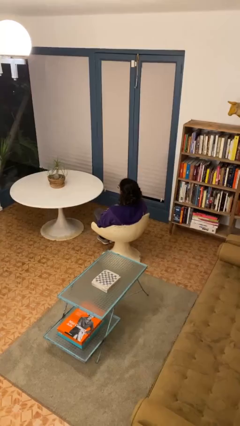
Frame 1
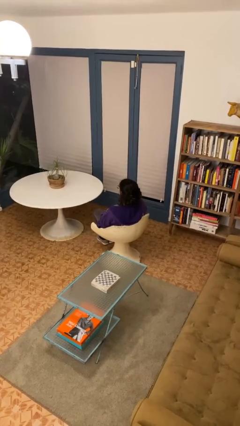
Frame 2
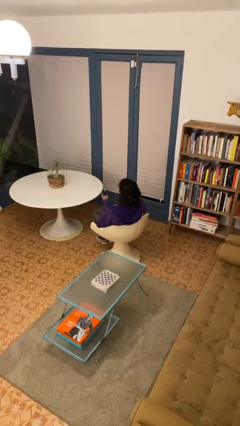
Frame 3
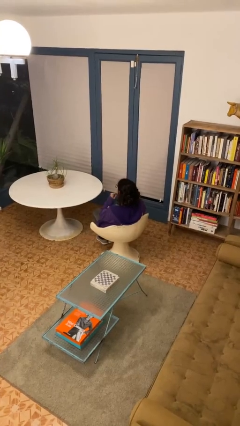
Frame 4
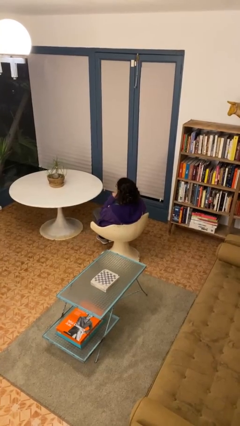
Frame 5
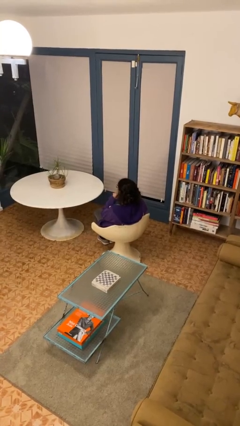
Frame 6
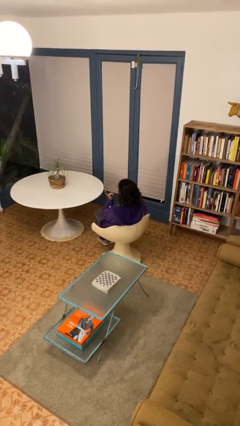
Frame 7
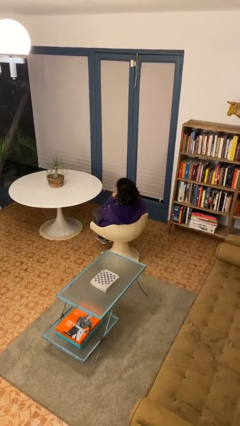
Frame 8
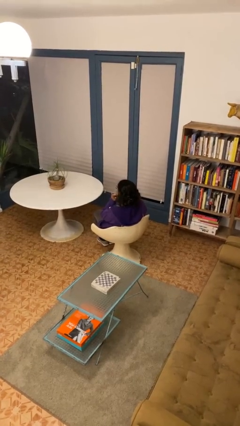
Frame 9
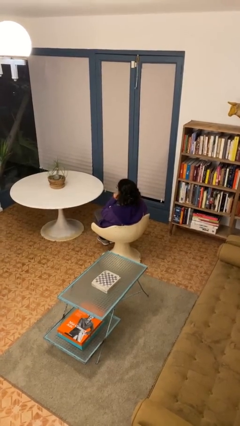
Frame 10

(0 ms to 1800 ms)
person gestures listen closely

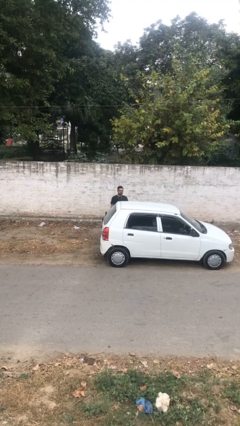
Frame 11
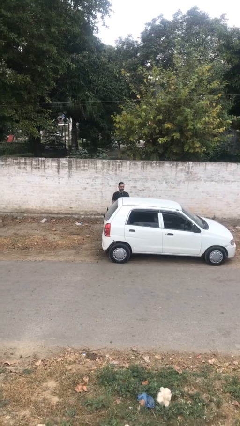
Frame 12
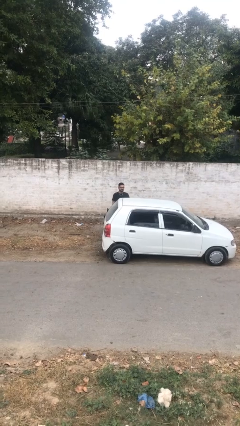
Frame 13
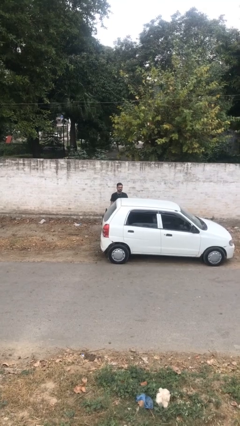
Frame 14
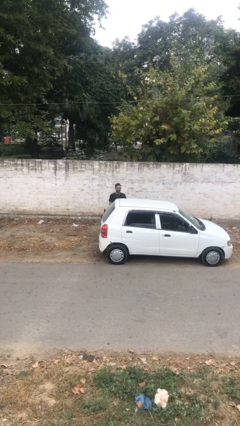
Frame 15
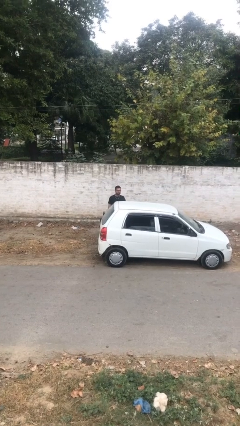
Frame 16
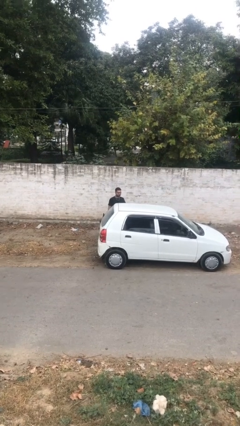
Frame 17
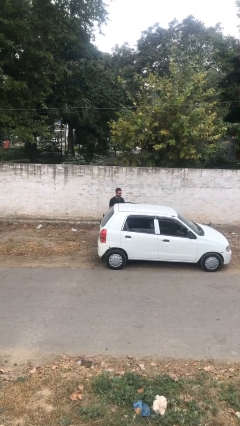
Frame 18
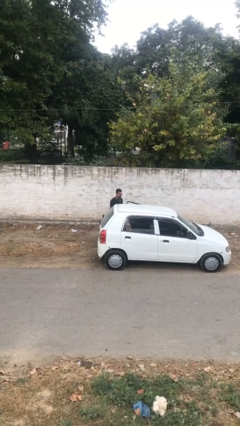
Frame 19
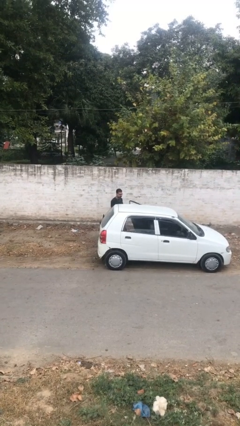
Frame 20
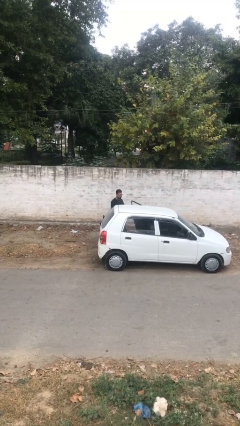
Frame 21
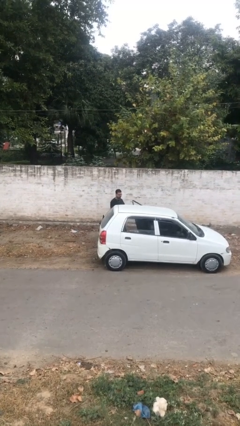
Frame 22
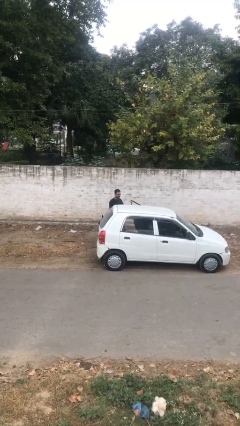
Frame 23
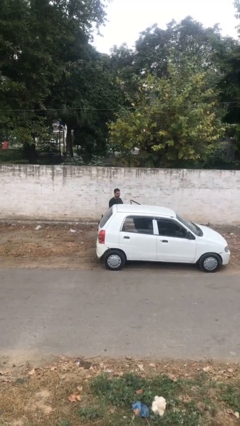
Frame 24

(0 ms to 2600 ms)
person opens car door

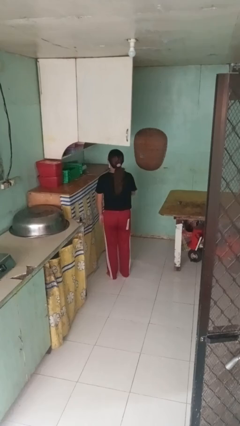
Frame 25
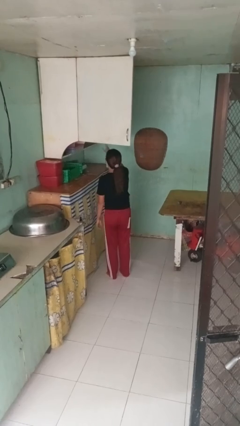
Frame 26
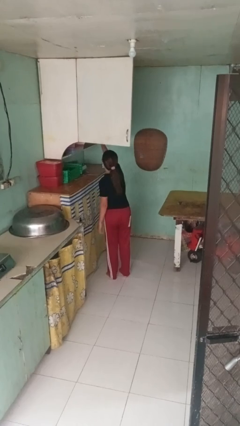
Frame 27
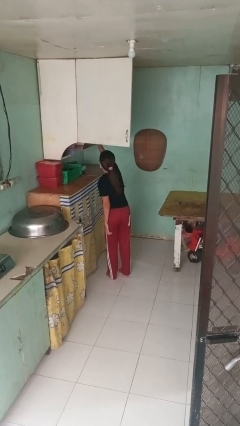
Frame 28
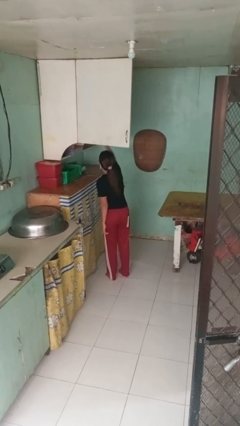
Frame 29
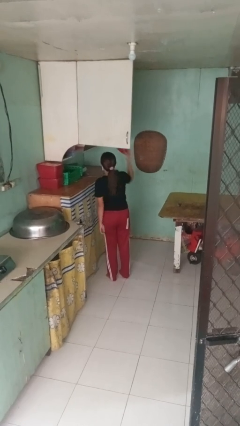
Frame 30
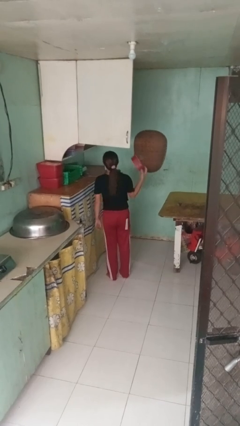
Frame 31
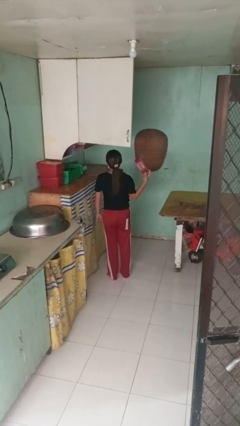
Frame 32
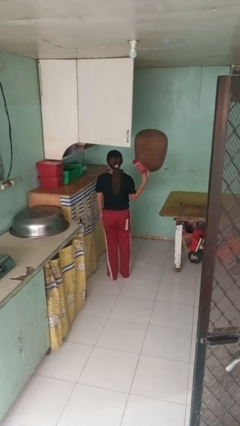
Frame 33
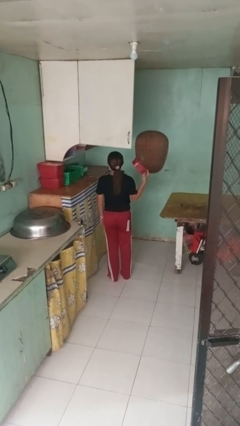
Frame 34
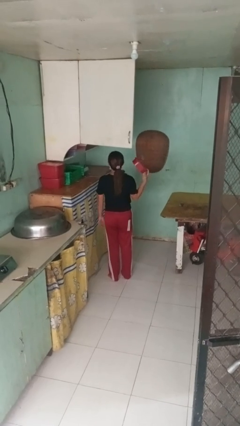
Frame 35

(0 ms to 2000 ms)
person takes object from cabinet

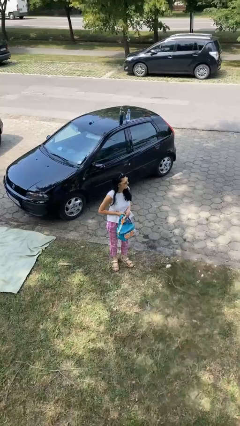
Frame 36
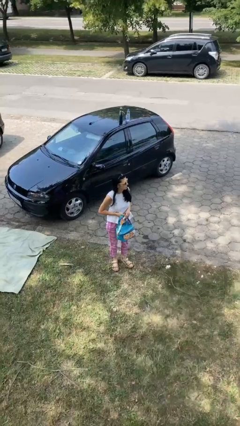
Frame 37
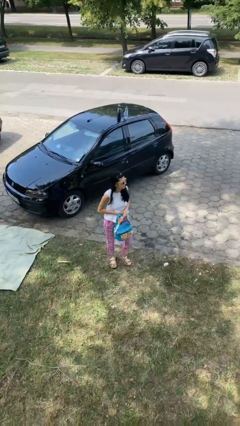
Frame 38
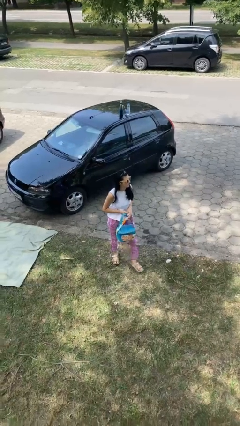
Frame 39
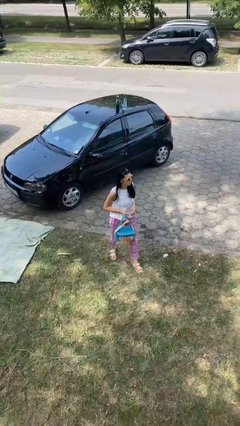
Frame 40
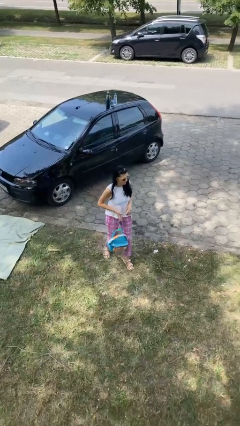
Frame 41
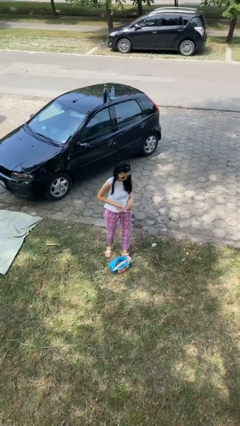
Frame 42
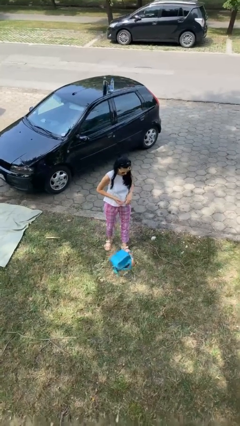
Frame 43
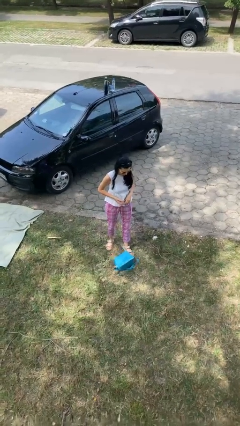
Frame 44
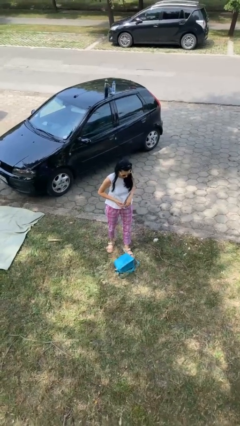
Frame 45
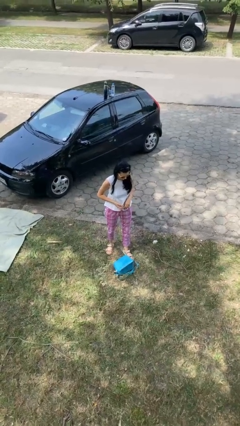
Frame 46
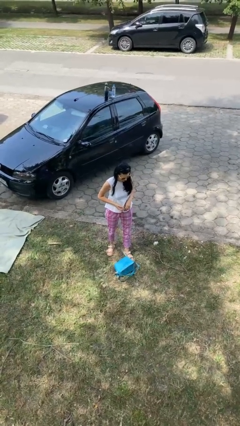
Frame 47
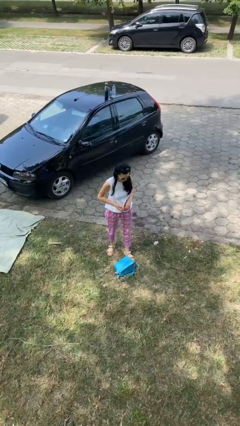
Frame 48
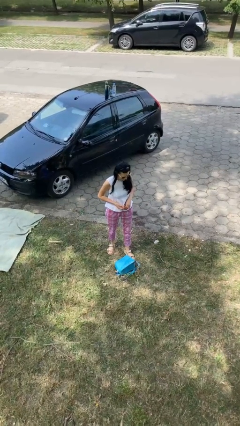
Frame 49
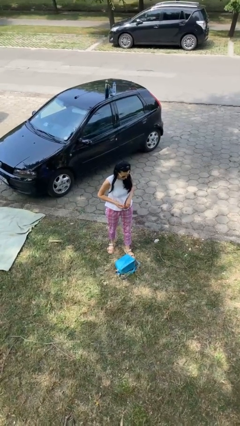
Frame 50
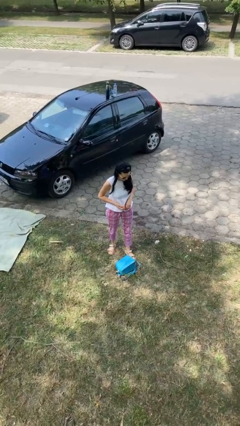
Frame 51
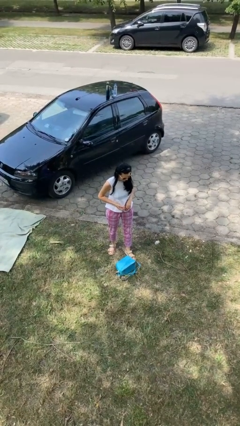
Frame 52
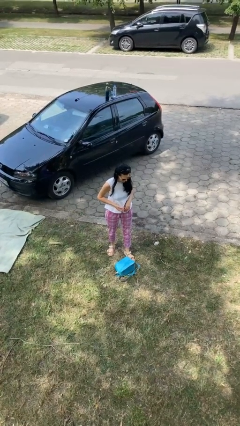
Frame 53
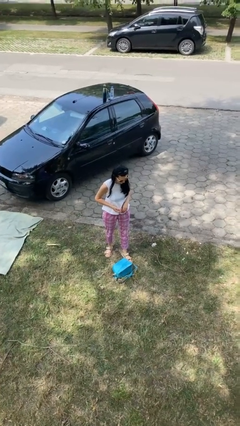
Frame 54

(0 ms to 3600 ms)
person drops object

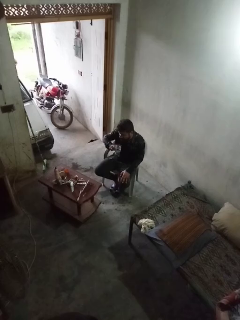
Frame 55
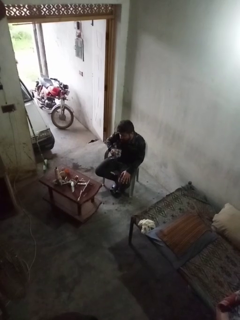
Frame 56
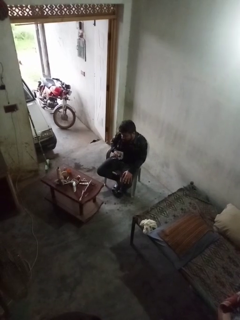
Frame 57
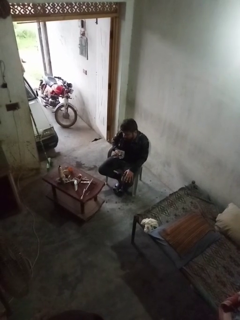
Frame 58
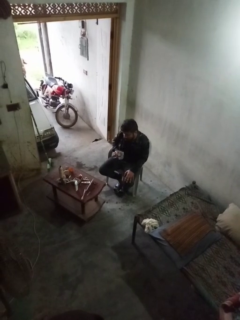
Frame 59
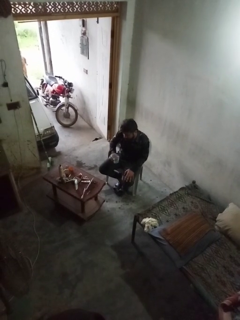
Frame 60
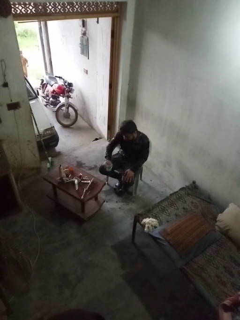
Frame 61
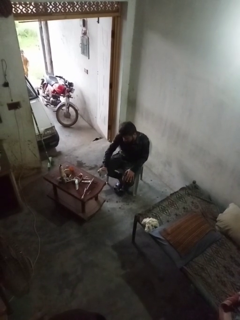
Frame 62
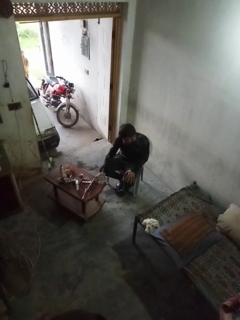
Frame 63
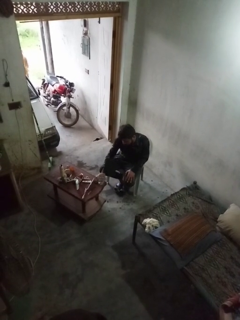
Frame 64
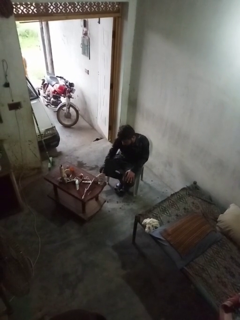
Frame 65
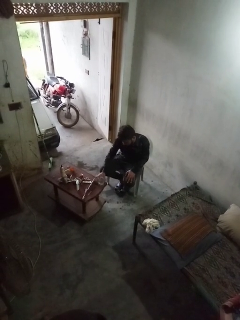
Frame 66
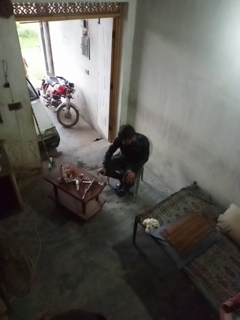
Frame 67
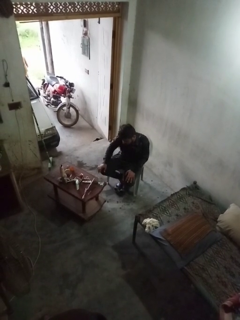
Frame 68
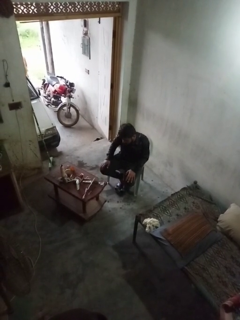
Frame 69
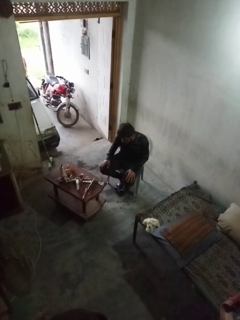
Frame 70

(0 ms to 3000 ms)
person puts down object on table

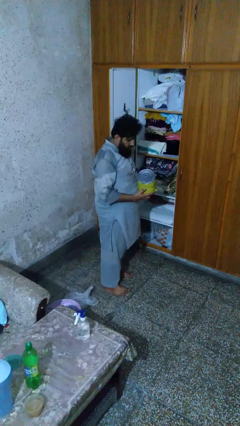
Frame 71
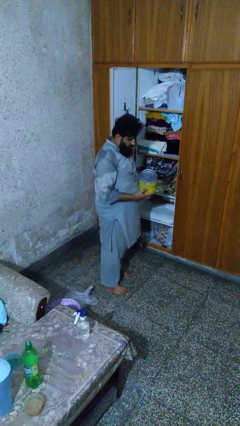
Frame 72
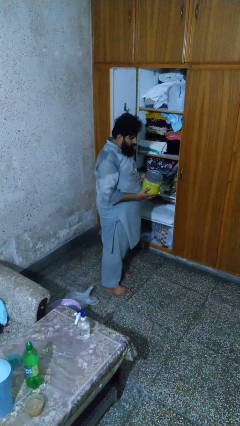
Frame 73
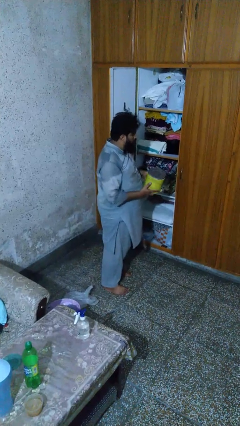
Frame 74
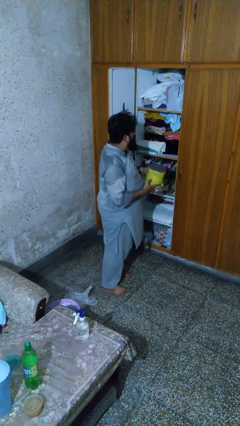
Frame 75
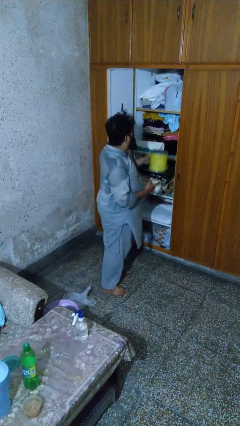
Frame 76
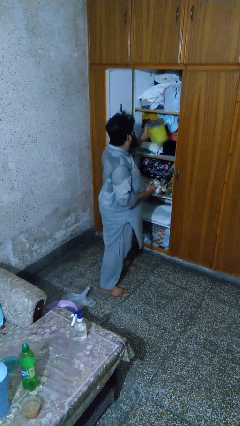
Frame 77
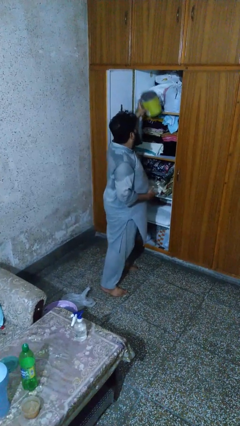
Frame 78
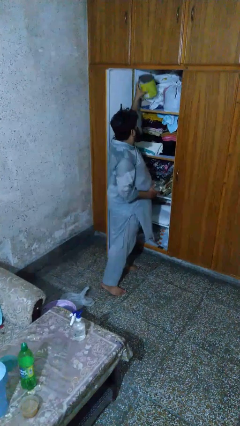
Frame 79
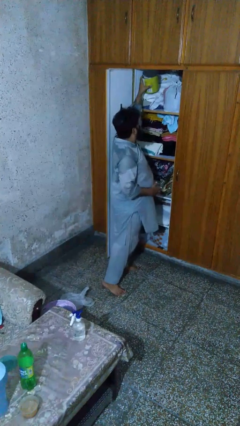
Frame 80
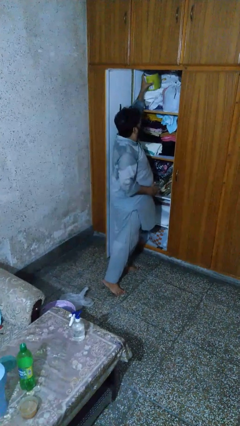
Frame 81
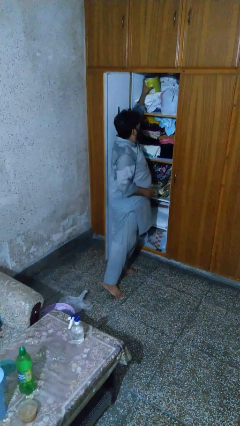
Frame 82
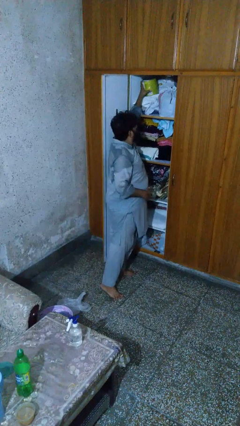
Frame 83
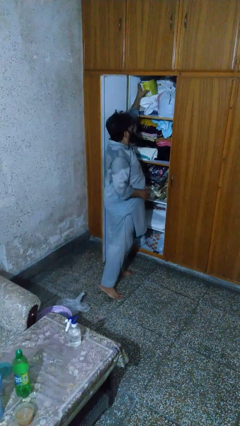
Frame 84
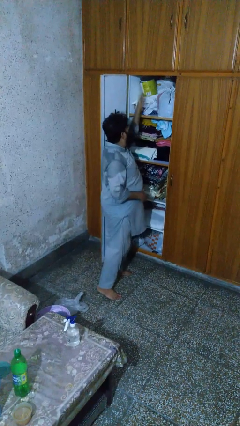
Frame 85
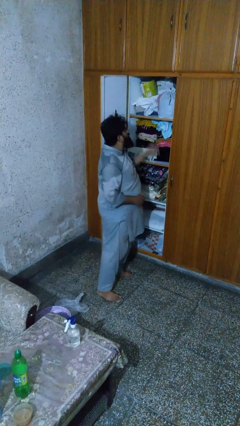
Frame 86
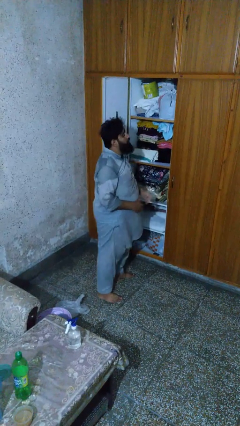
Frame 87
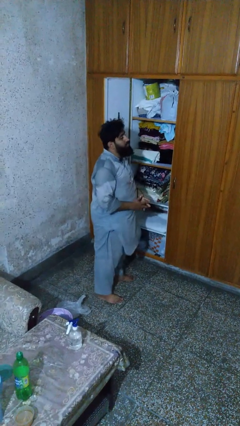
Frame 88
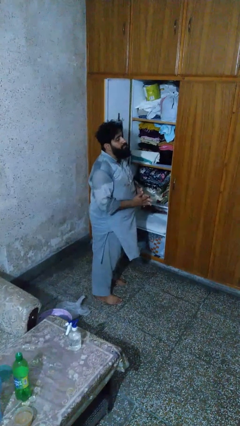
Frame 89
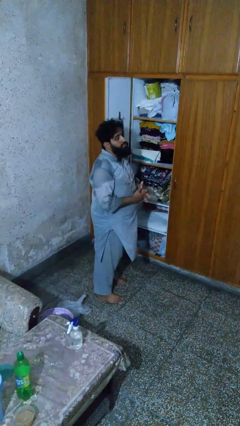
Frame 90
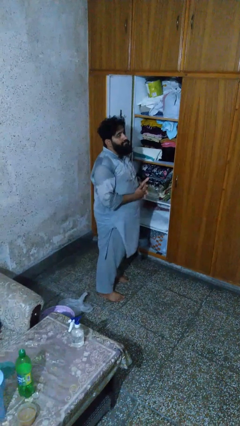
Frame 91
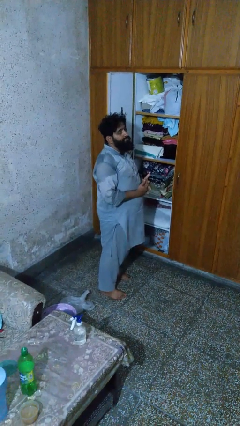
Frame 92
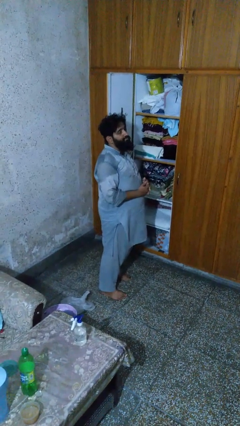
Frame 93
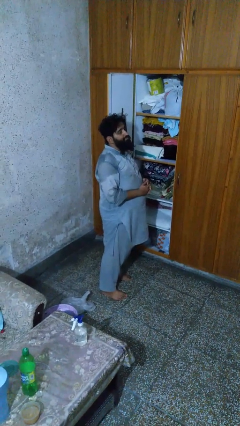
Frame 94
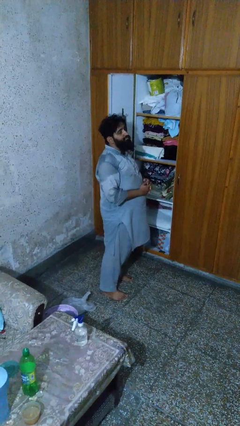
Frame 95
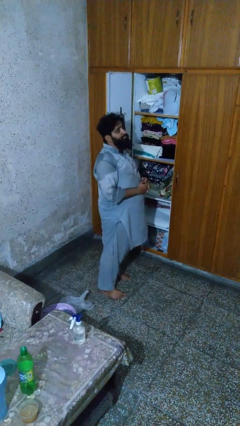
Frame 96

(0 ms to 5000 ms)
person puts down object on shelf
